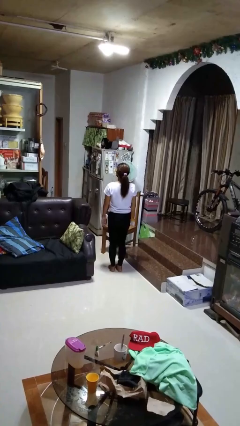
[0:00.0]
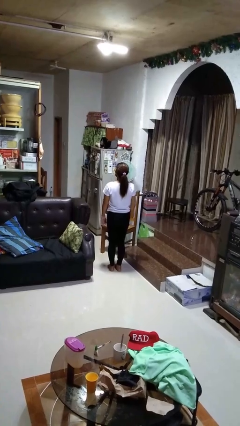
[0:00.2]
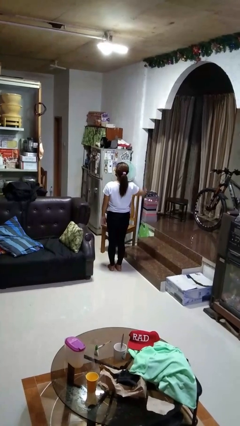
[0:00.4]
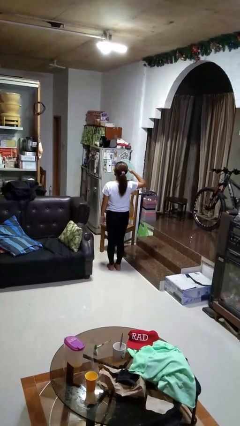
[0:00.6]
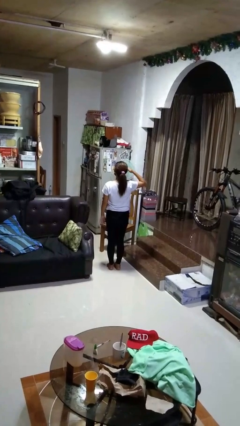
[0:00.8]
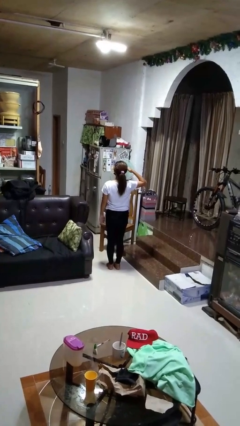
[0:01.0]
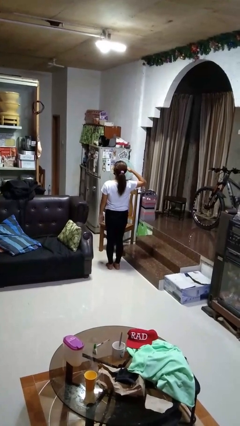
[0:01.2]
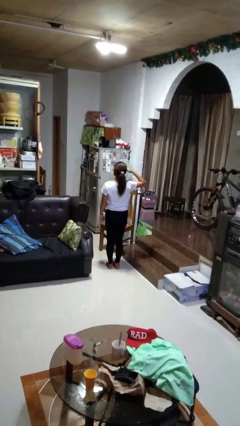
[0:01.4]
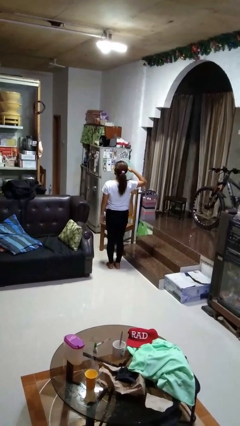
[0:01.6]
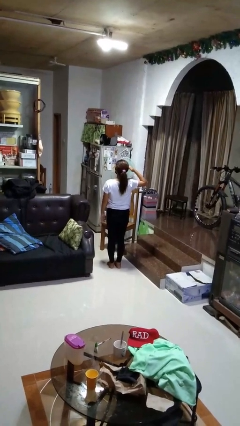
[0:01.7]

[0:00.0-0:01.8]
person salutes

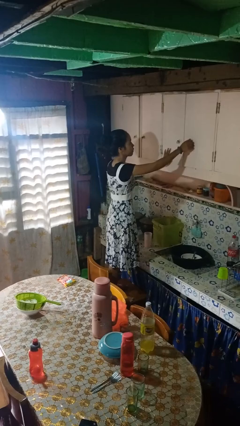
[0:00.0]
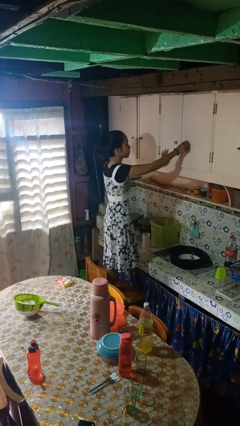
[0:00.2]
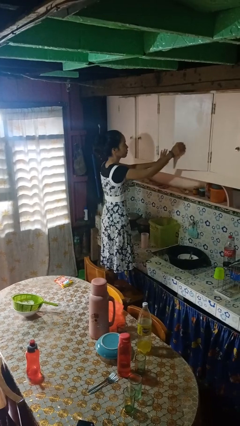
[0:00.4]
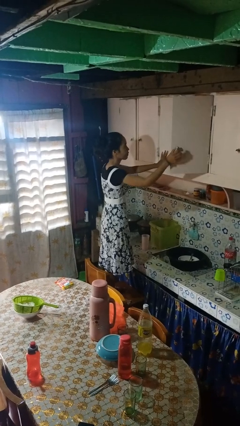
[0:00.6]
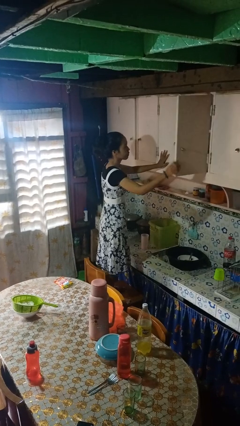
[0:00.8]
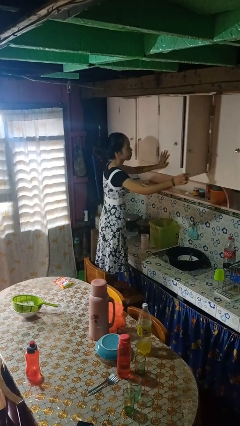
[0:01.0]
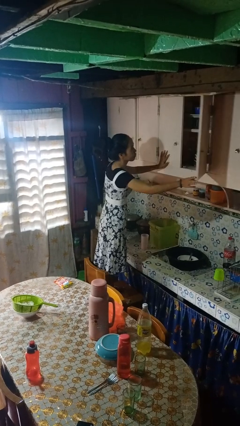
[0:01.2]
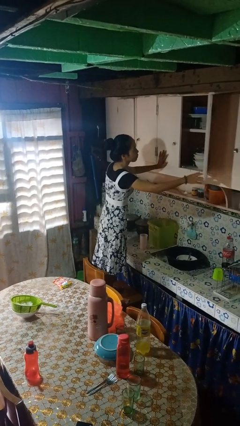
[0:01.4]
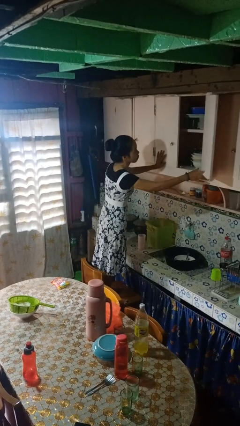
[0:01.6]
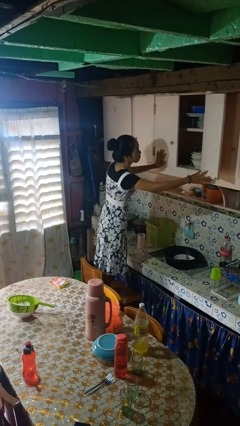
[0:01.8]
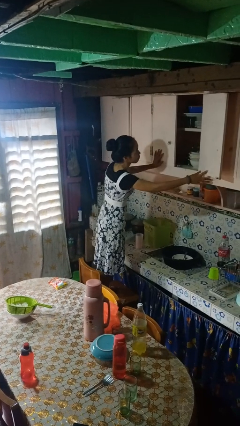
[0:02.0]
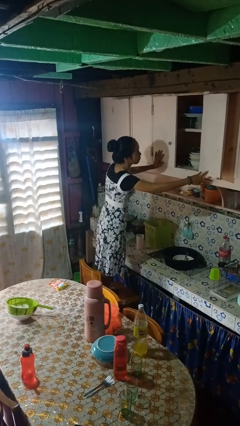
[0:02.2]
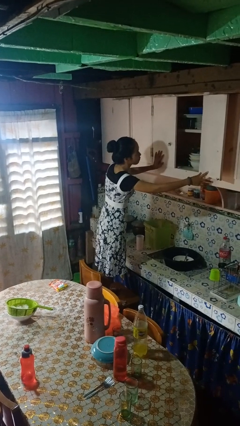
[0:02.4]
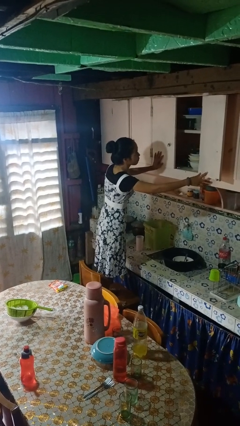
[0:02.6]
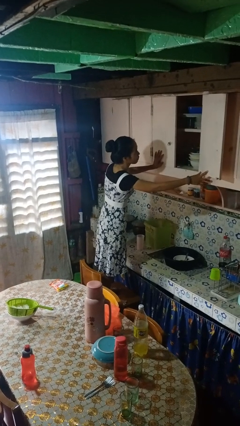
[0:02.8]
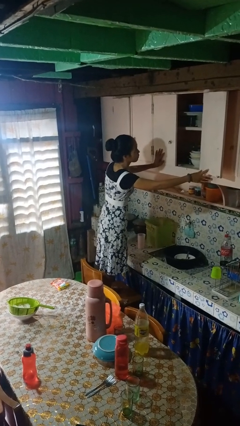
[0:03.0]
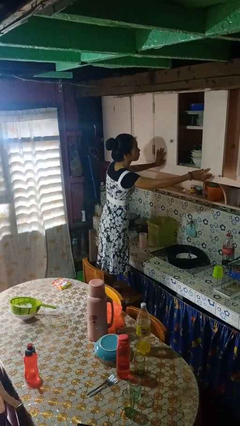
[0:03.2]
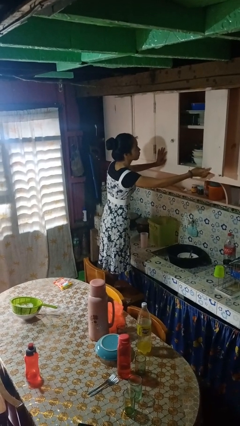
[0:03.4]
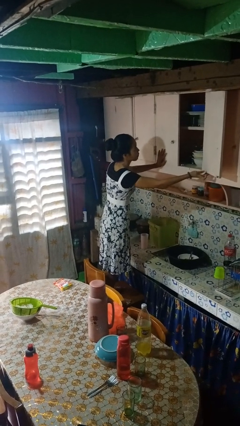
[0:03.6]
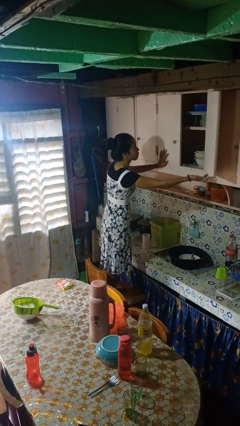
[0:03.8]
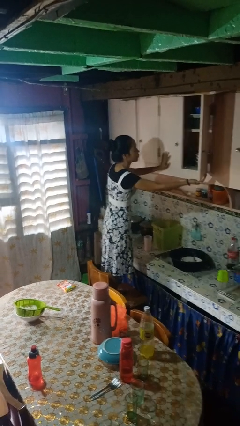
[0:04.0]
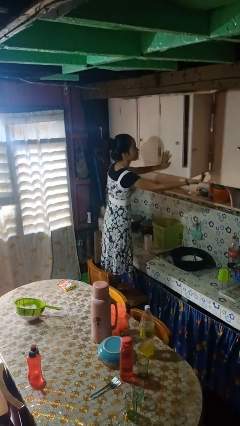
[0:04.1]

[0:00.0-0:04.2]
person opens cabinet

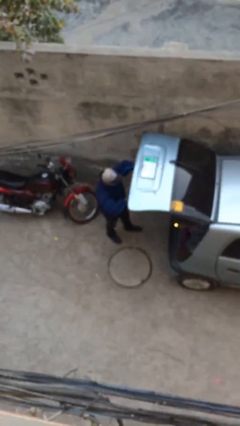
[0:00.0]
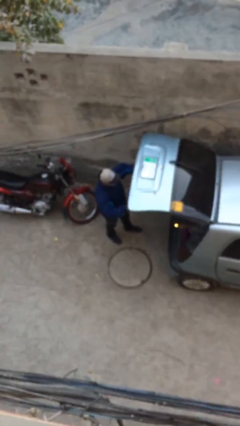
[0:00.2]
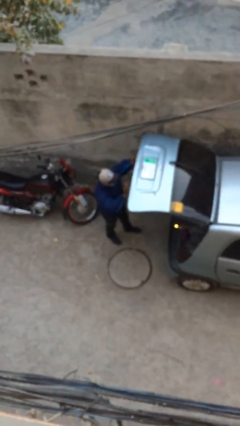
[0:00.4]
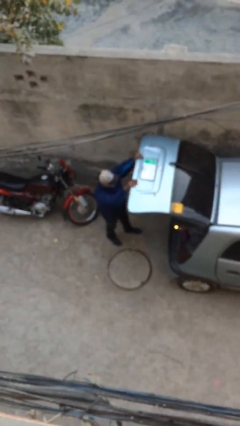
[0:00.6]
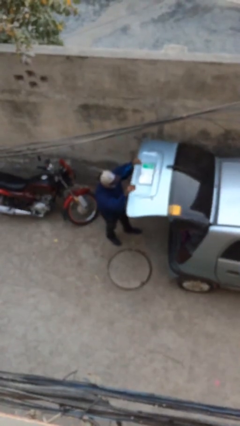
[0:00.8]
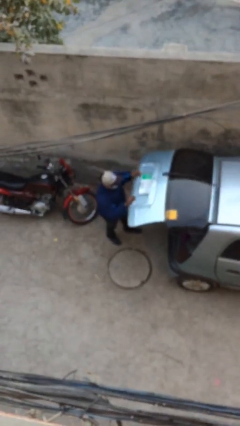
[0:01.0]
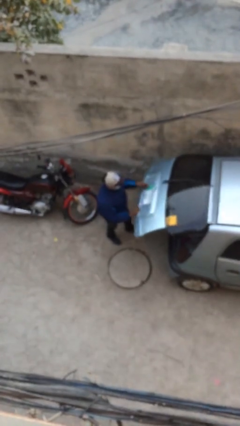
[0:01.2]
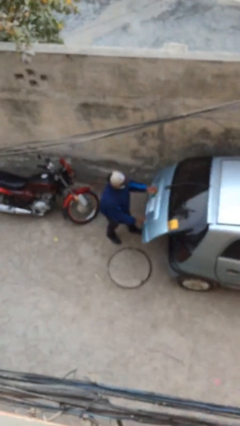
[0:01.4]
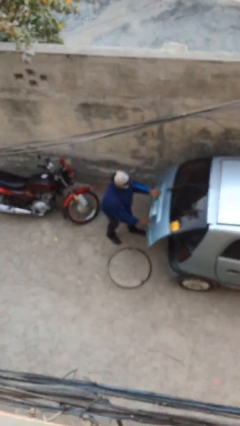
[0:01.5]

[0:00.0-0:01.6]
person closes car trunk

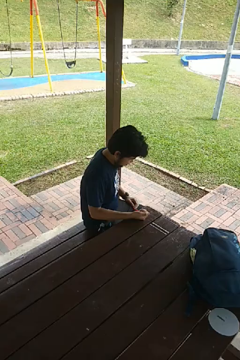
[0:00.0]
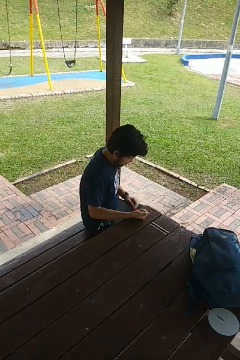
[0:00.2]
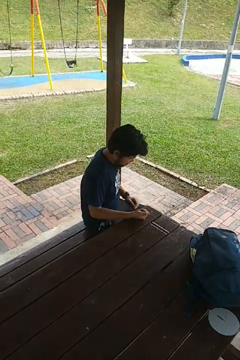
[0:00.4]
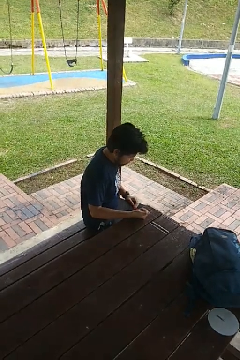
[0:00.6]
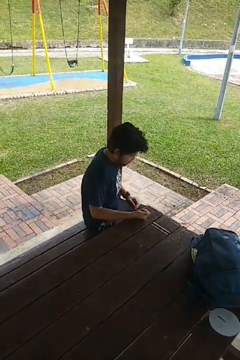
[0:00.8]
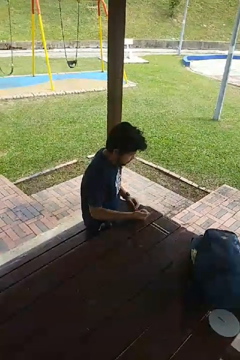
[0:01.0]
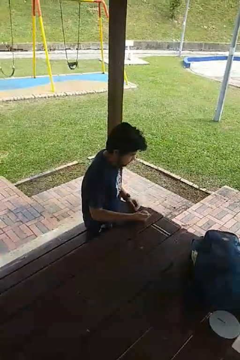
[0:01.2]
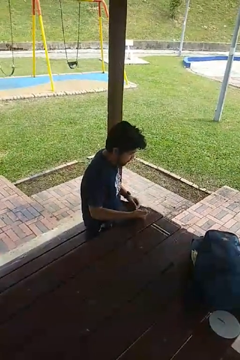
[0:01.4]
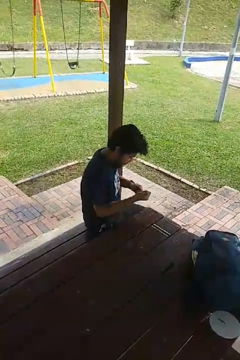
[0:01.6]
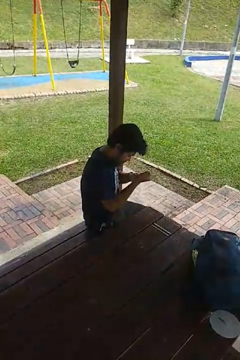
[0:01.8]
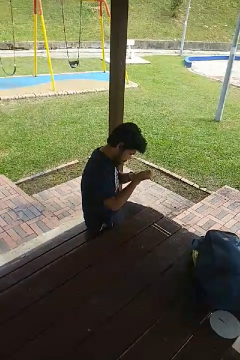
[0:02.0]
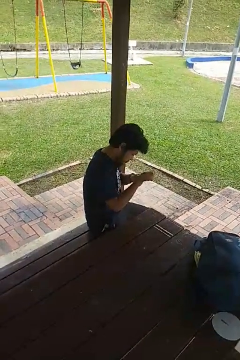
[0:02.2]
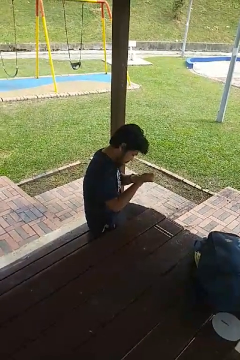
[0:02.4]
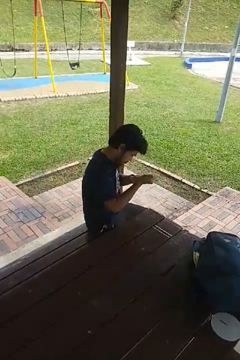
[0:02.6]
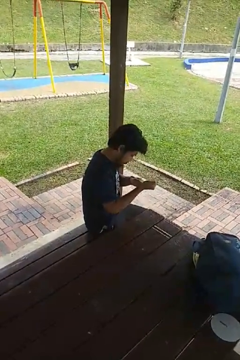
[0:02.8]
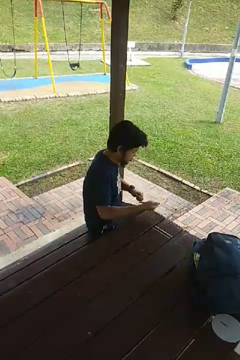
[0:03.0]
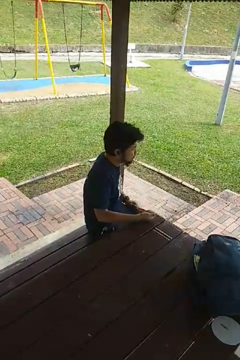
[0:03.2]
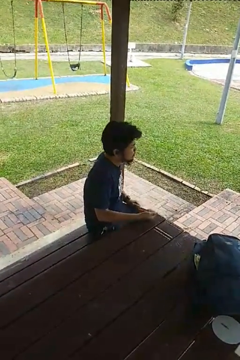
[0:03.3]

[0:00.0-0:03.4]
person paints fingernails

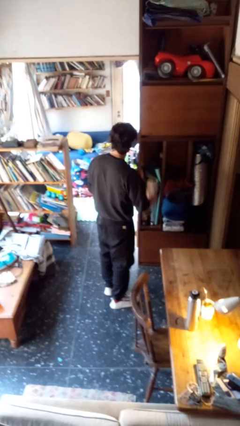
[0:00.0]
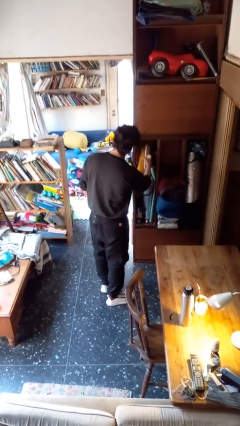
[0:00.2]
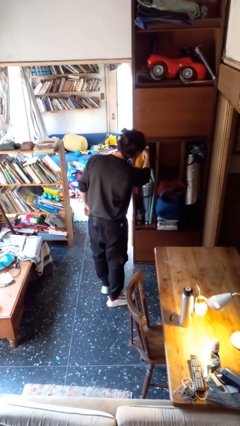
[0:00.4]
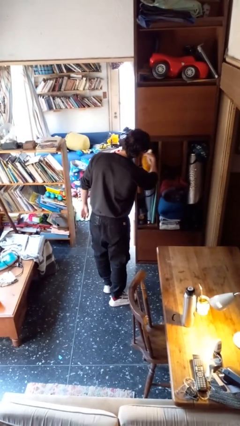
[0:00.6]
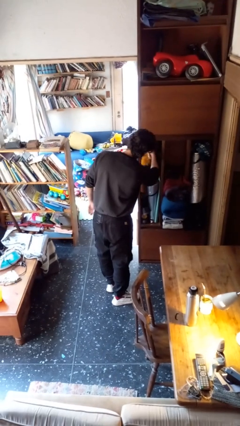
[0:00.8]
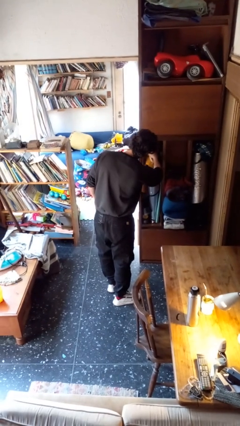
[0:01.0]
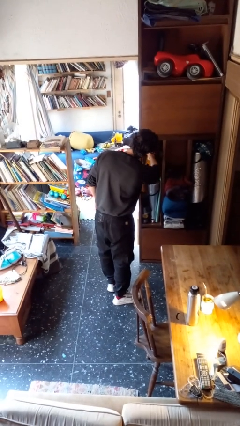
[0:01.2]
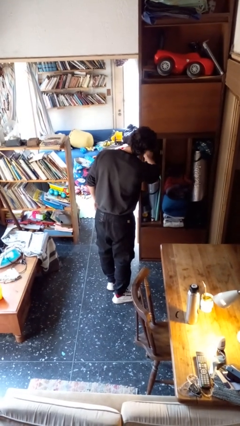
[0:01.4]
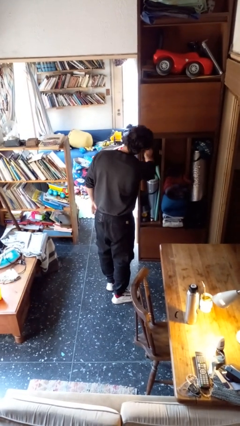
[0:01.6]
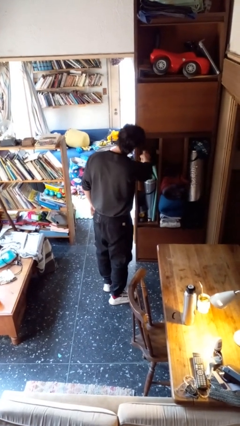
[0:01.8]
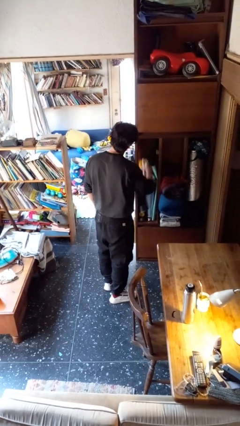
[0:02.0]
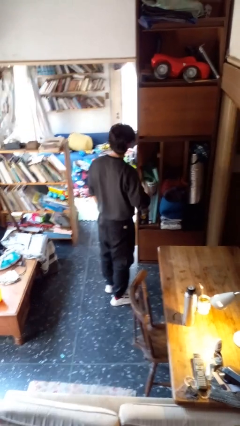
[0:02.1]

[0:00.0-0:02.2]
person dusts furniture

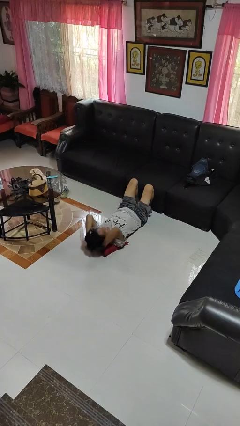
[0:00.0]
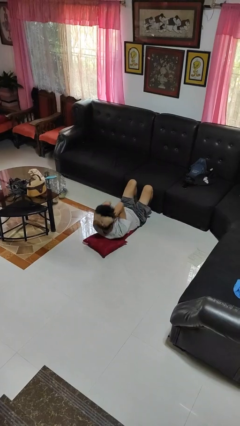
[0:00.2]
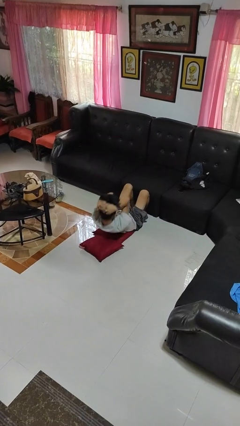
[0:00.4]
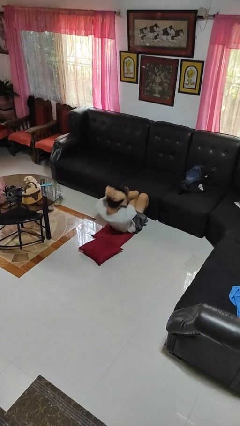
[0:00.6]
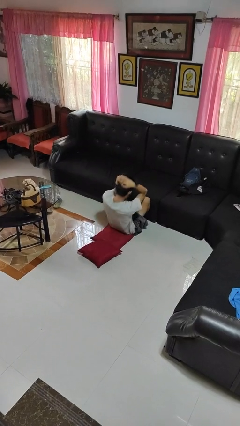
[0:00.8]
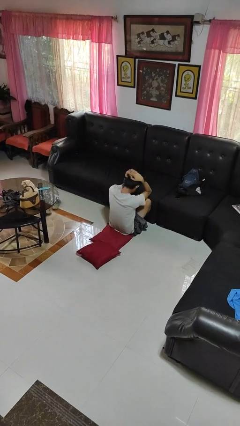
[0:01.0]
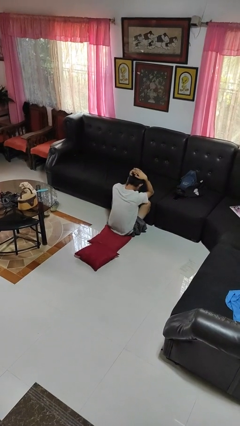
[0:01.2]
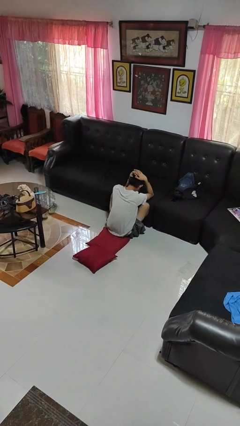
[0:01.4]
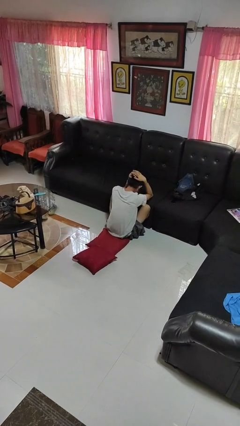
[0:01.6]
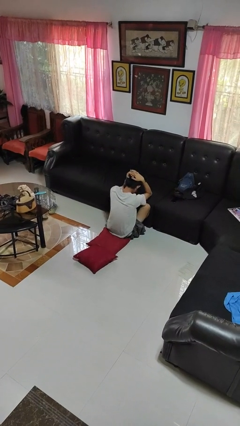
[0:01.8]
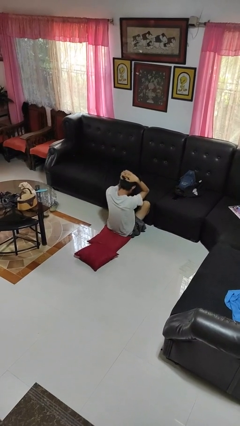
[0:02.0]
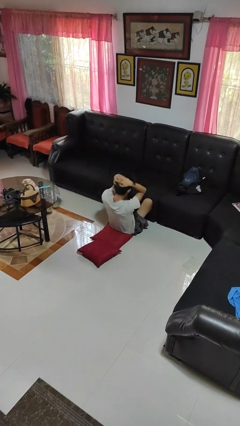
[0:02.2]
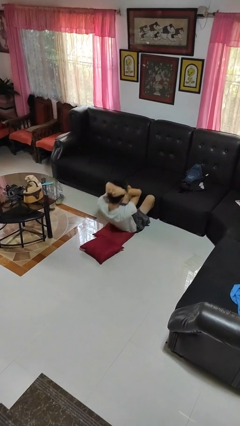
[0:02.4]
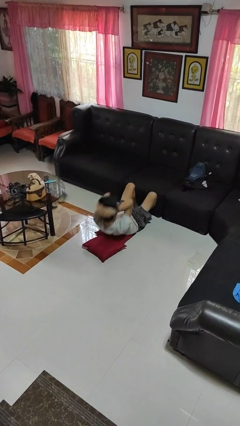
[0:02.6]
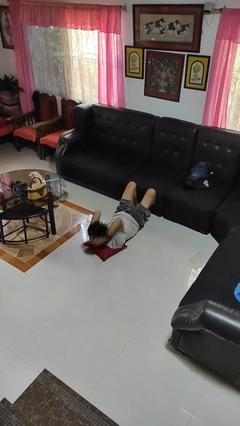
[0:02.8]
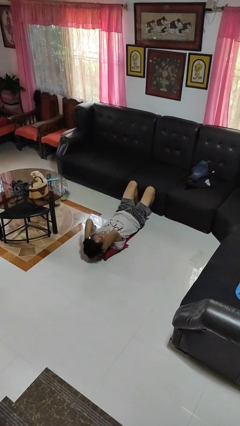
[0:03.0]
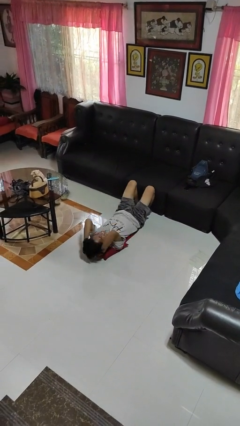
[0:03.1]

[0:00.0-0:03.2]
person exercises with situp

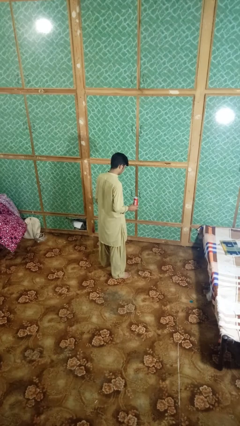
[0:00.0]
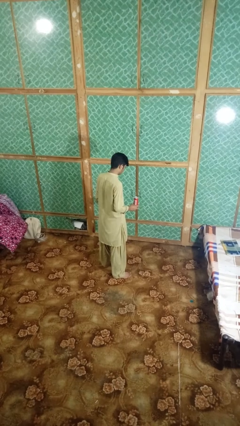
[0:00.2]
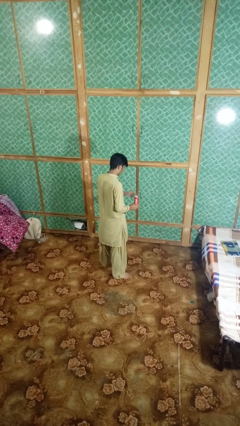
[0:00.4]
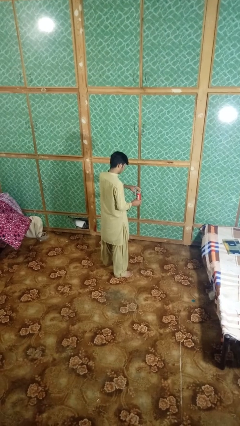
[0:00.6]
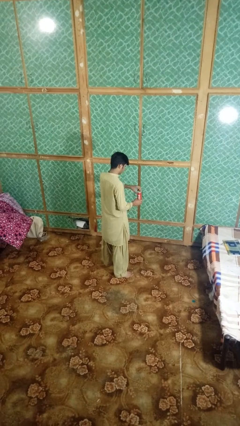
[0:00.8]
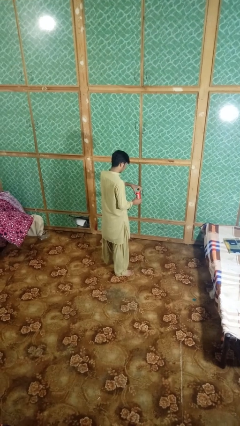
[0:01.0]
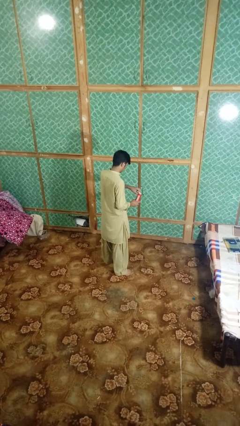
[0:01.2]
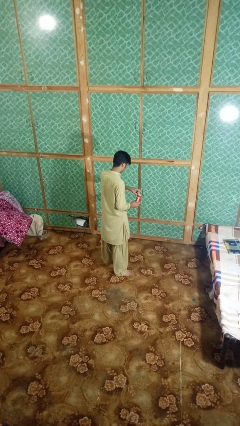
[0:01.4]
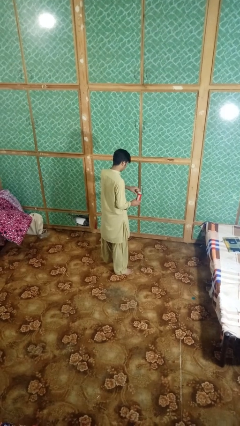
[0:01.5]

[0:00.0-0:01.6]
person opens can with can opener
